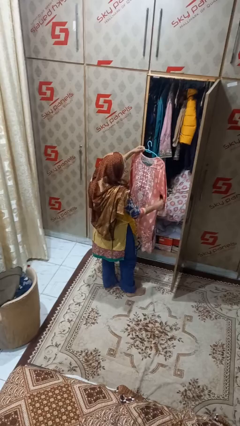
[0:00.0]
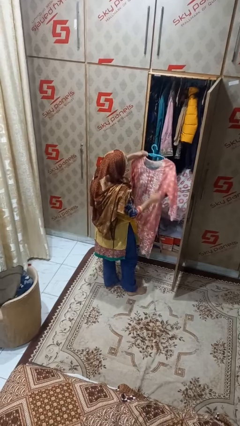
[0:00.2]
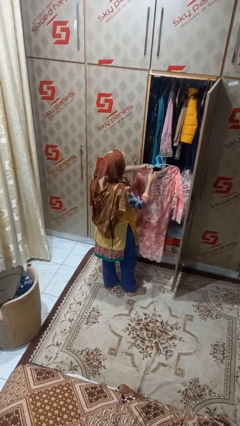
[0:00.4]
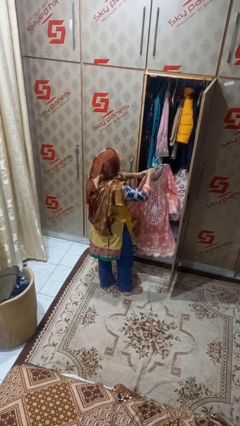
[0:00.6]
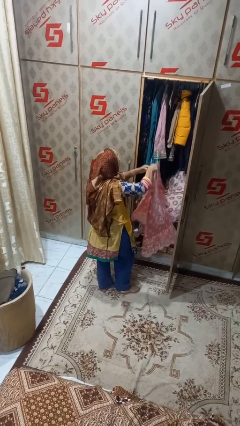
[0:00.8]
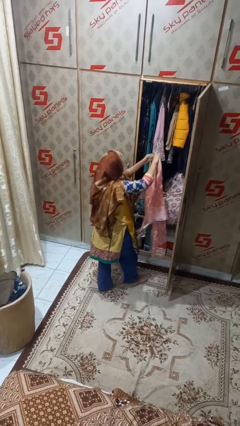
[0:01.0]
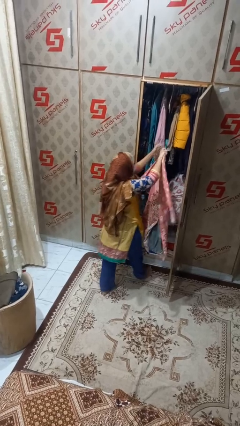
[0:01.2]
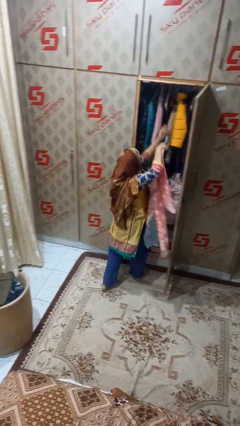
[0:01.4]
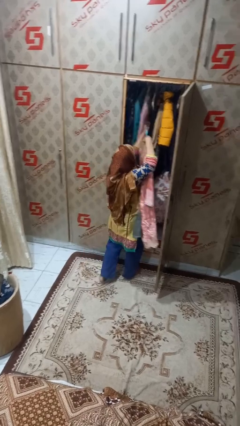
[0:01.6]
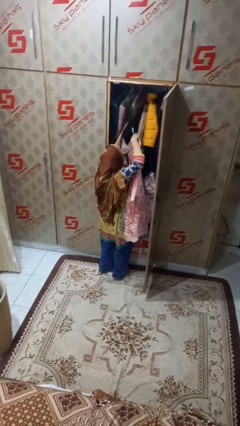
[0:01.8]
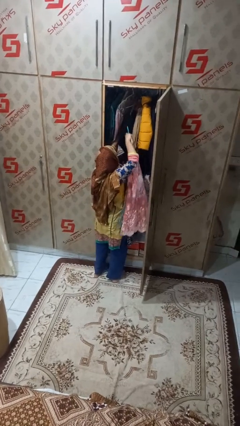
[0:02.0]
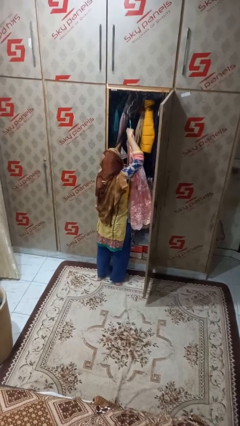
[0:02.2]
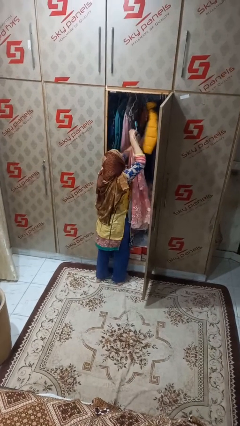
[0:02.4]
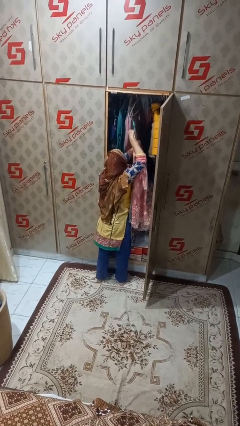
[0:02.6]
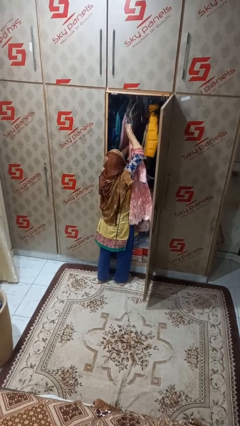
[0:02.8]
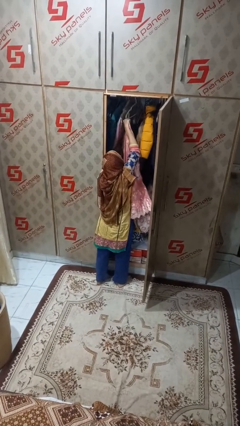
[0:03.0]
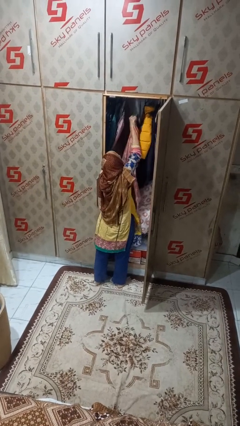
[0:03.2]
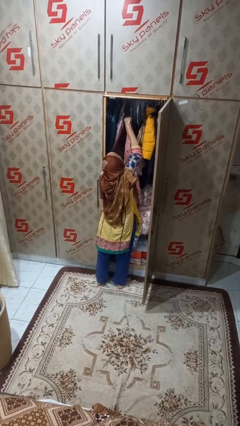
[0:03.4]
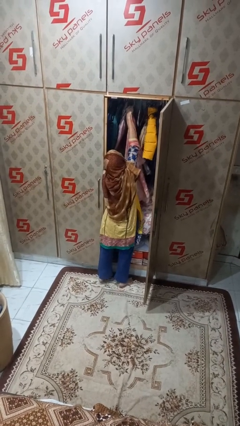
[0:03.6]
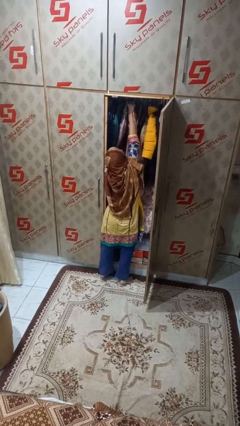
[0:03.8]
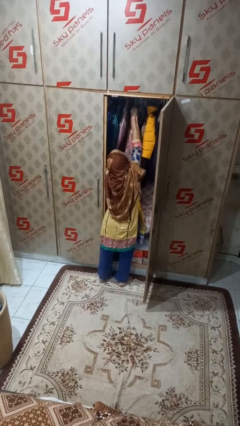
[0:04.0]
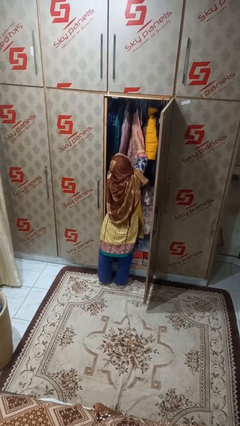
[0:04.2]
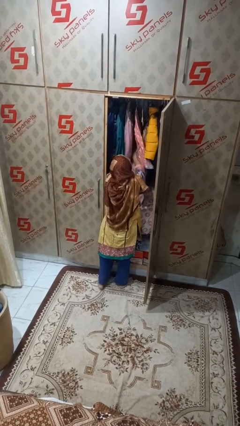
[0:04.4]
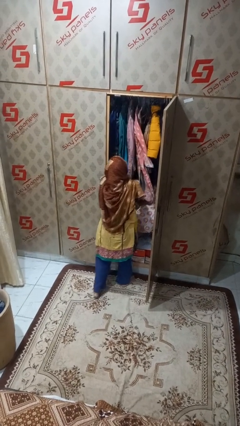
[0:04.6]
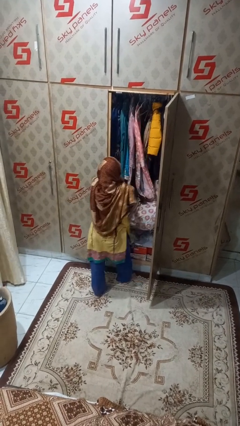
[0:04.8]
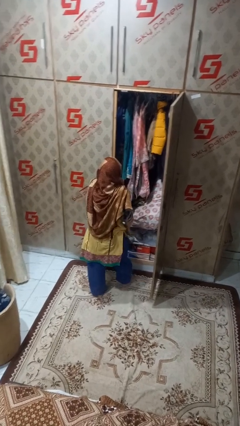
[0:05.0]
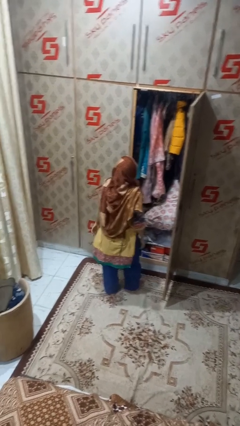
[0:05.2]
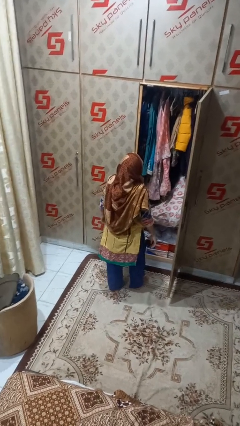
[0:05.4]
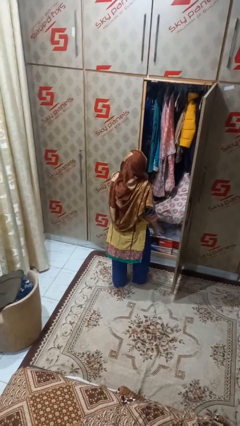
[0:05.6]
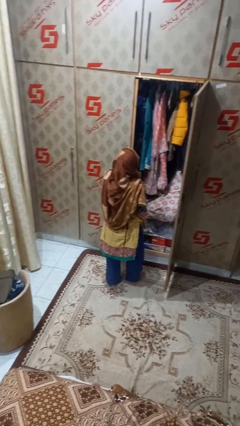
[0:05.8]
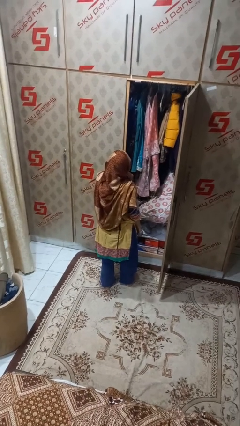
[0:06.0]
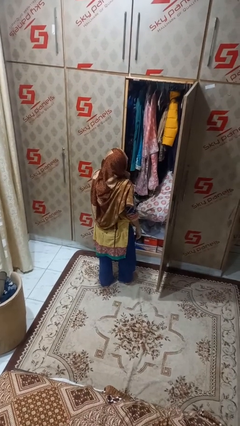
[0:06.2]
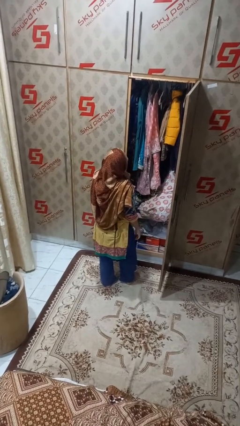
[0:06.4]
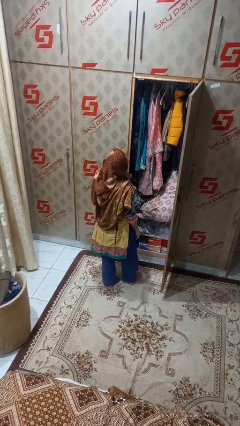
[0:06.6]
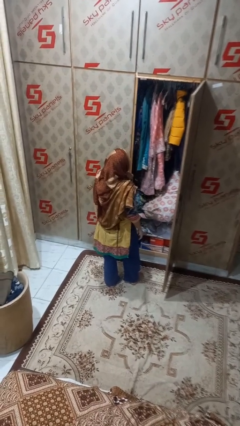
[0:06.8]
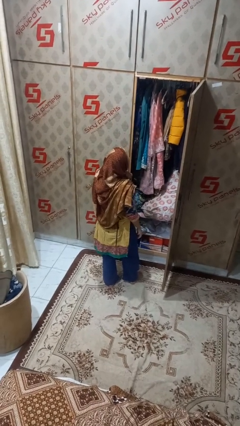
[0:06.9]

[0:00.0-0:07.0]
person puts clothes into closet

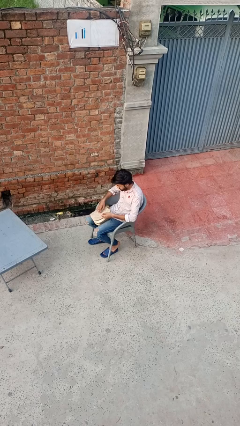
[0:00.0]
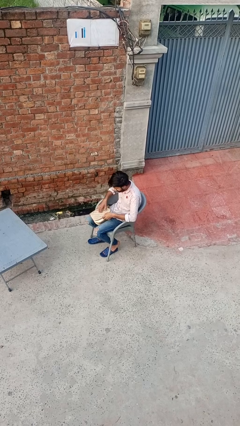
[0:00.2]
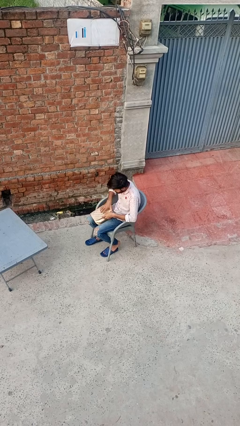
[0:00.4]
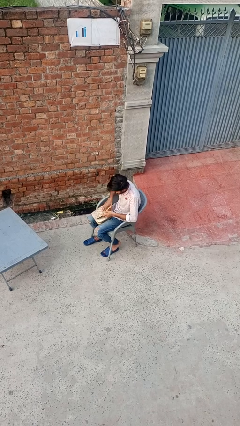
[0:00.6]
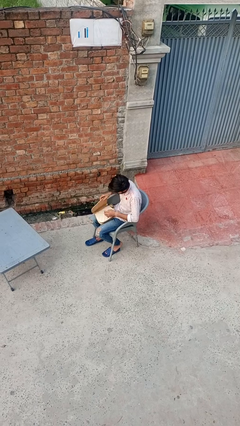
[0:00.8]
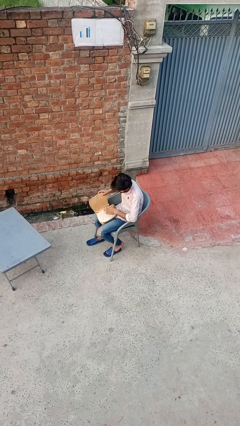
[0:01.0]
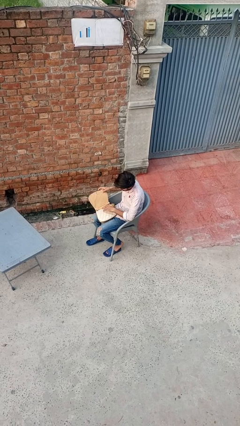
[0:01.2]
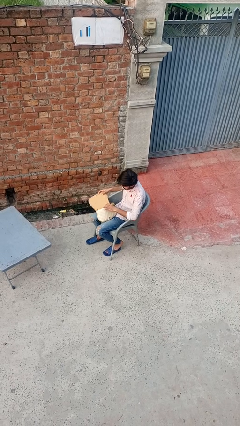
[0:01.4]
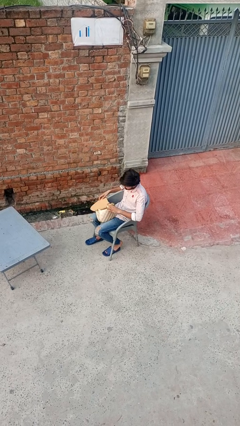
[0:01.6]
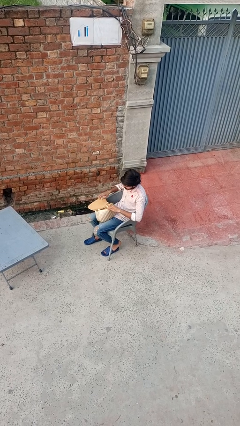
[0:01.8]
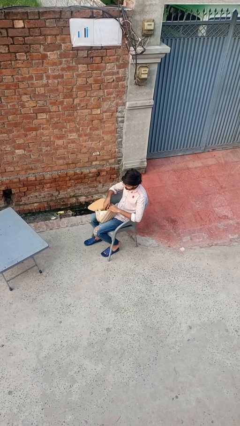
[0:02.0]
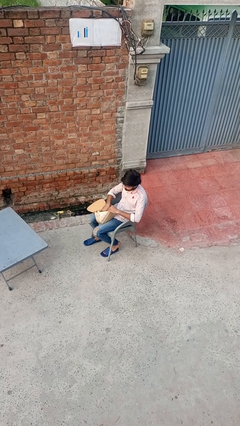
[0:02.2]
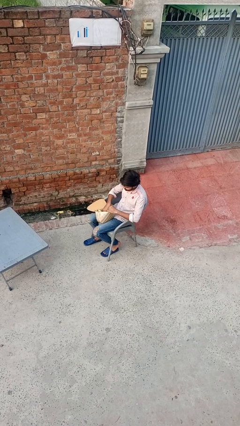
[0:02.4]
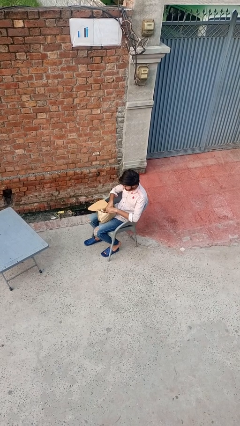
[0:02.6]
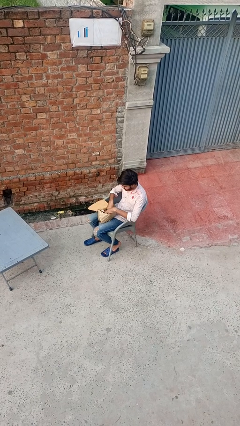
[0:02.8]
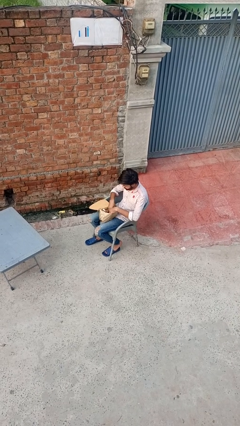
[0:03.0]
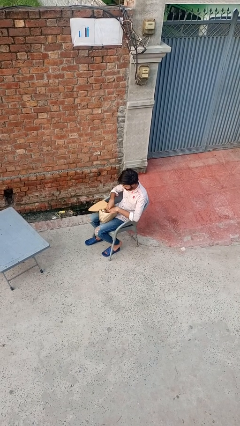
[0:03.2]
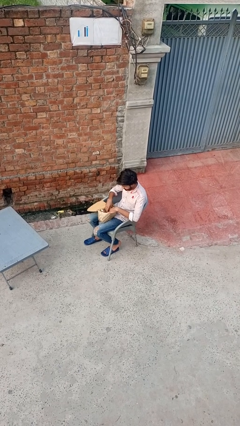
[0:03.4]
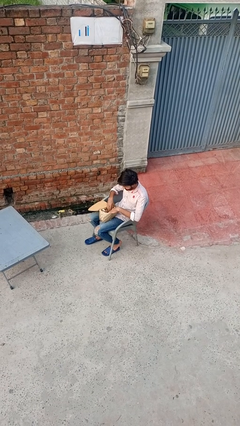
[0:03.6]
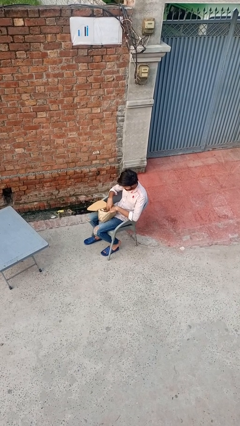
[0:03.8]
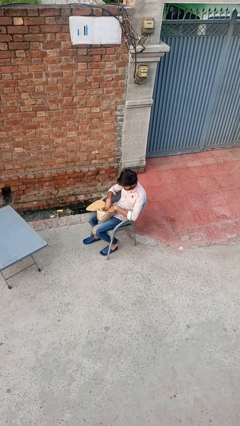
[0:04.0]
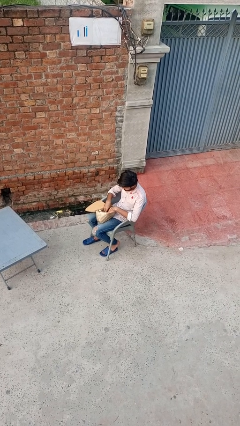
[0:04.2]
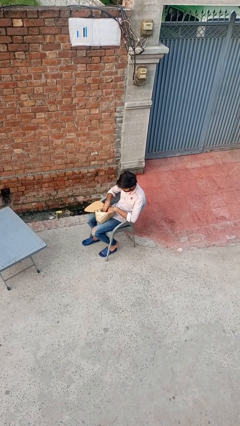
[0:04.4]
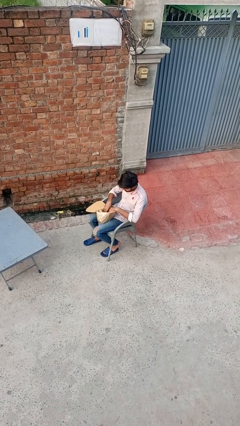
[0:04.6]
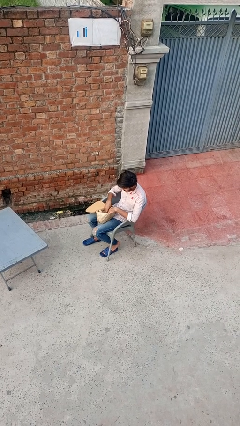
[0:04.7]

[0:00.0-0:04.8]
person searches in purse

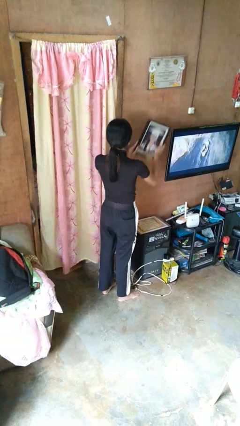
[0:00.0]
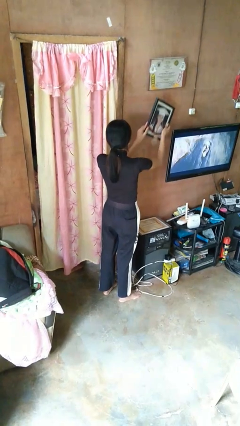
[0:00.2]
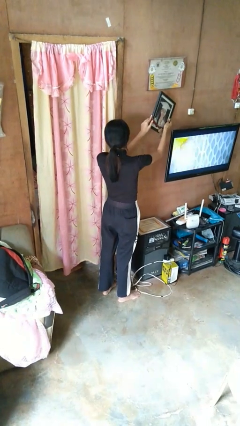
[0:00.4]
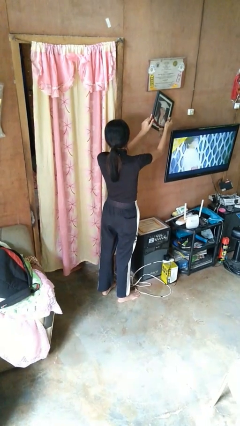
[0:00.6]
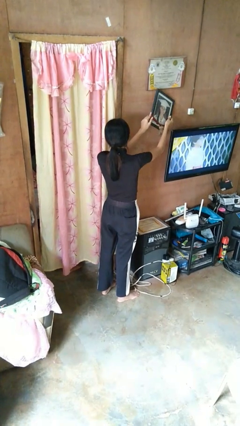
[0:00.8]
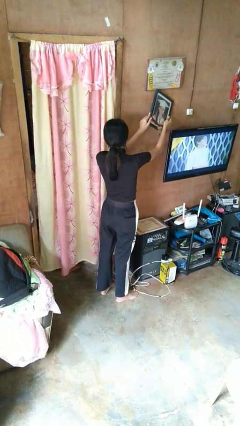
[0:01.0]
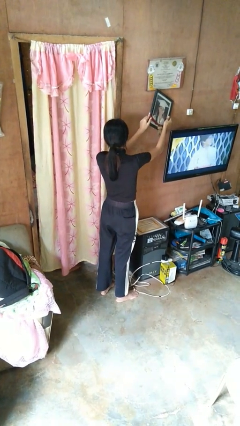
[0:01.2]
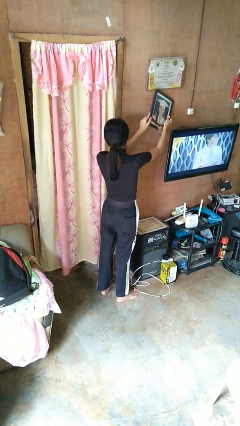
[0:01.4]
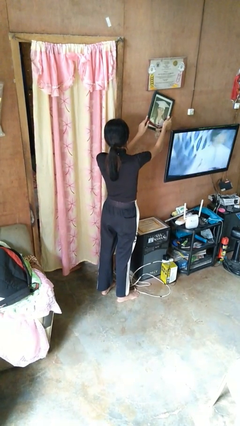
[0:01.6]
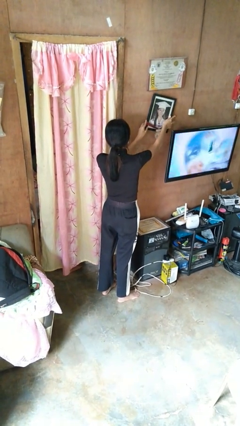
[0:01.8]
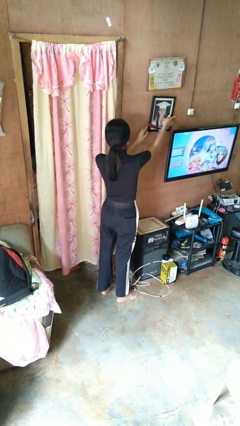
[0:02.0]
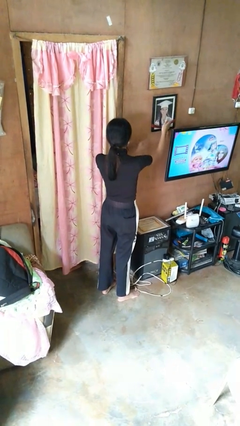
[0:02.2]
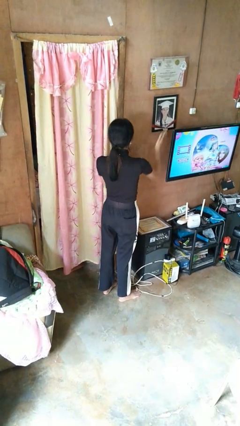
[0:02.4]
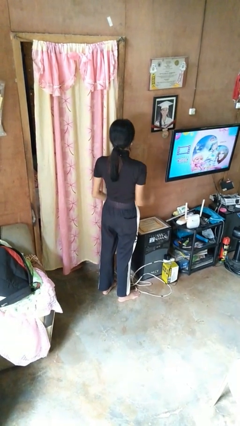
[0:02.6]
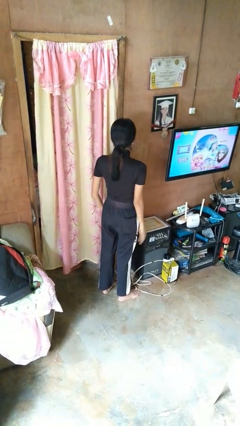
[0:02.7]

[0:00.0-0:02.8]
person puts up picture frame

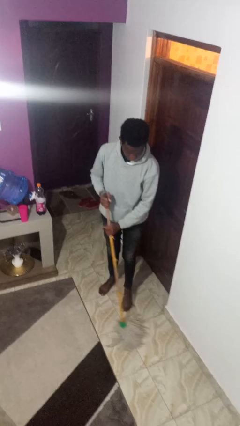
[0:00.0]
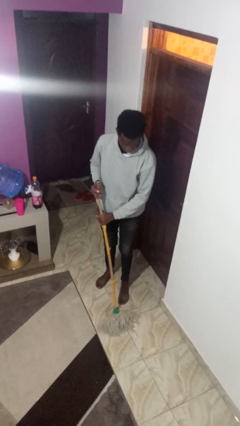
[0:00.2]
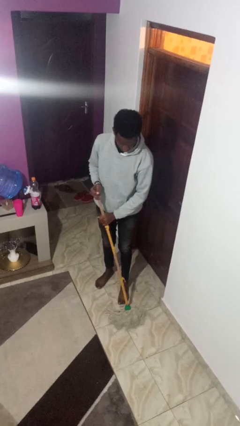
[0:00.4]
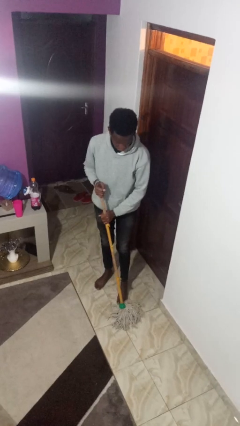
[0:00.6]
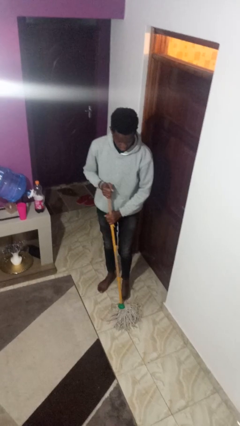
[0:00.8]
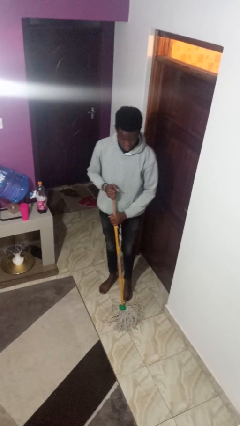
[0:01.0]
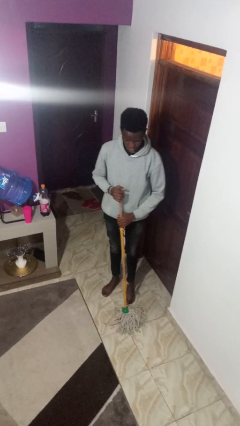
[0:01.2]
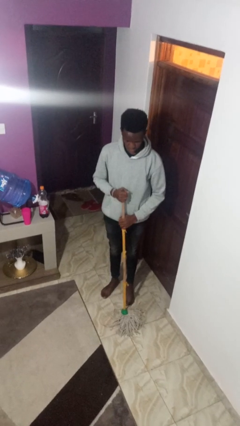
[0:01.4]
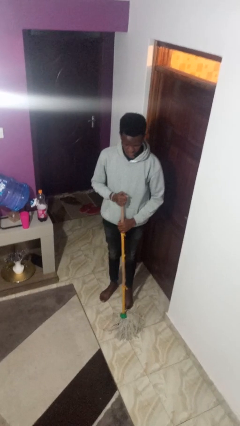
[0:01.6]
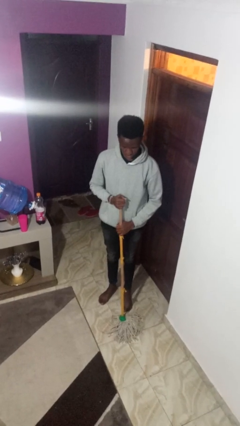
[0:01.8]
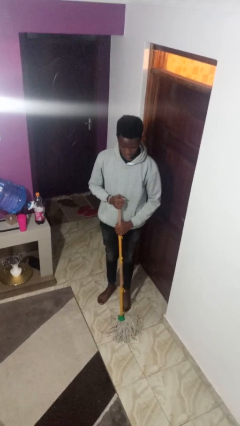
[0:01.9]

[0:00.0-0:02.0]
person mops

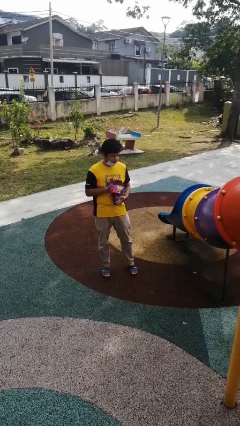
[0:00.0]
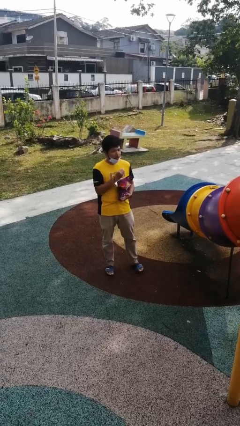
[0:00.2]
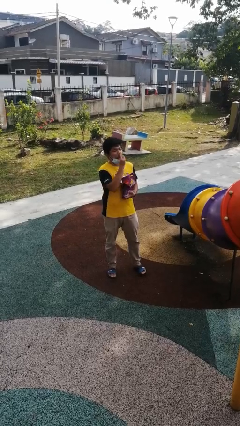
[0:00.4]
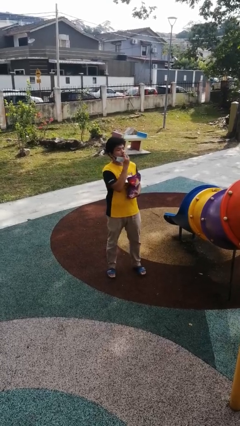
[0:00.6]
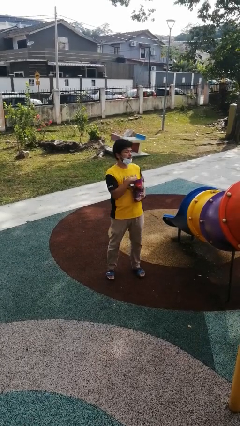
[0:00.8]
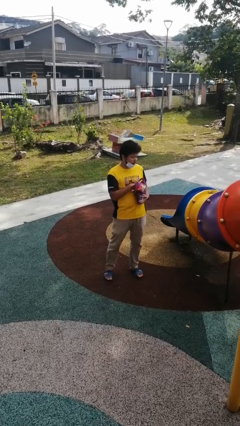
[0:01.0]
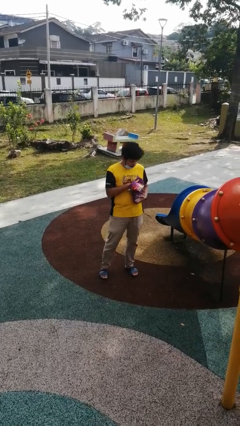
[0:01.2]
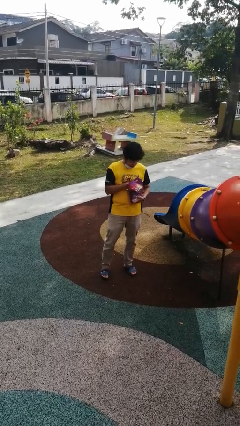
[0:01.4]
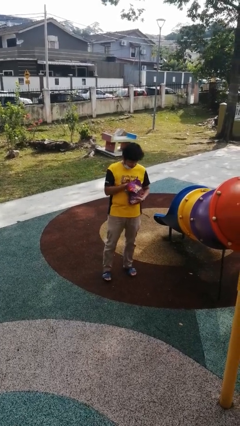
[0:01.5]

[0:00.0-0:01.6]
person eats snack from bag
